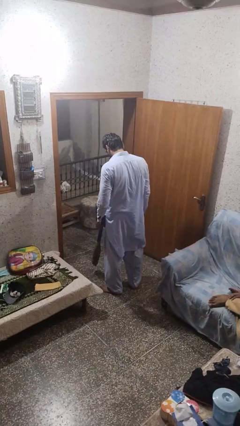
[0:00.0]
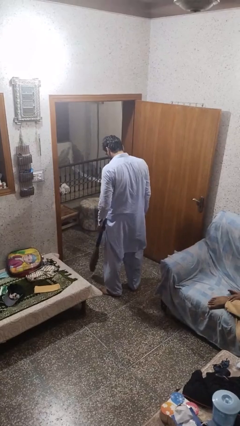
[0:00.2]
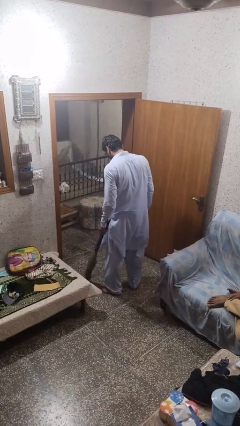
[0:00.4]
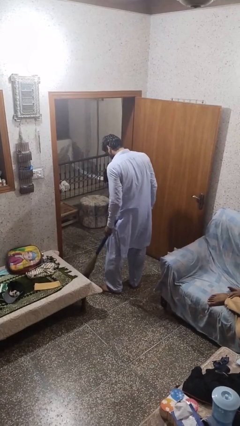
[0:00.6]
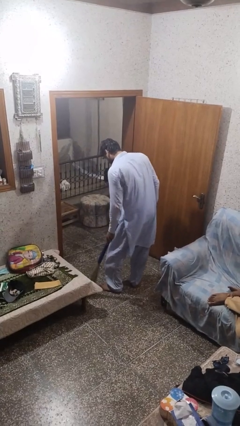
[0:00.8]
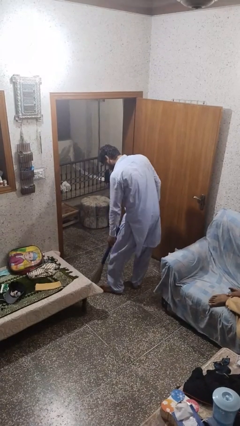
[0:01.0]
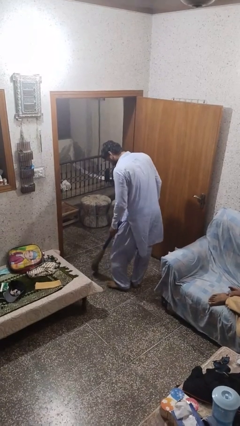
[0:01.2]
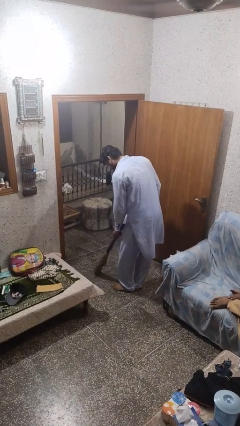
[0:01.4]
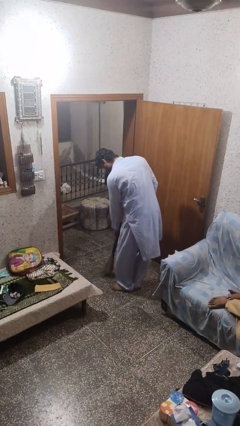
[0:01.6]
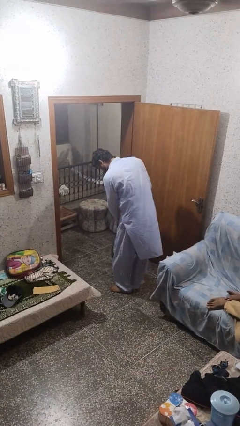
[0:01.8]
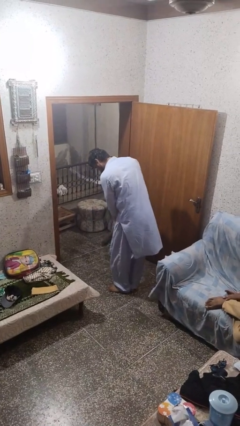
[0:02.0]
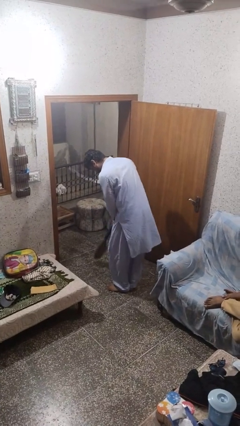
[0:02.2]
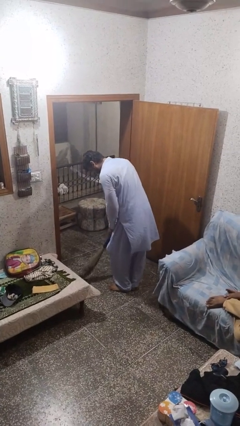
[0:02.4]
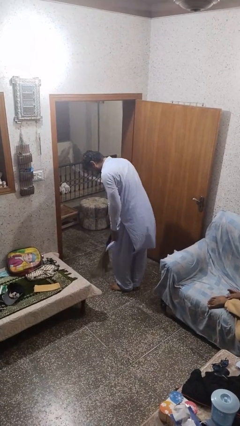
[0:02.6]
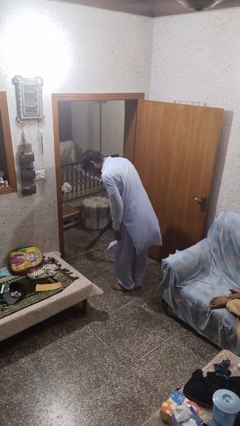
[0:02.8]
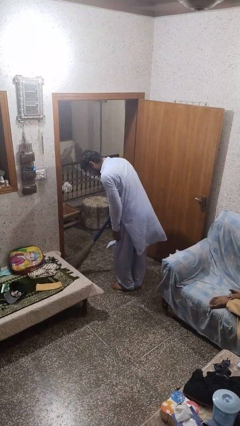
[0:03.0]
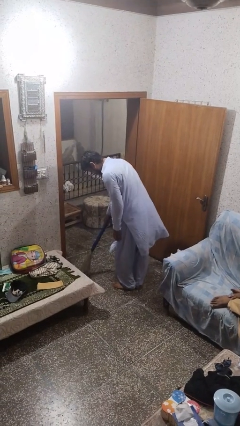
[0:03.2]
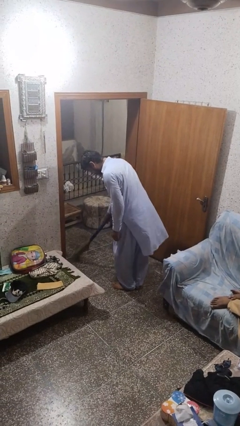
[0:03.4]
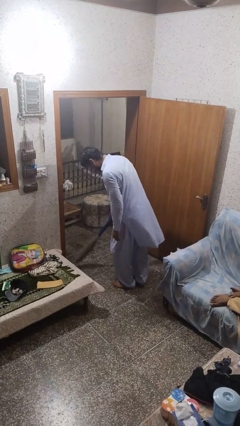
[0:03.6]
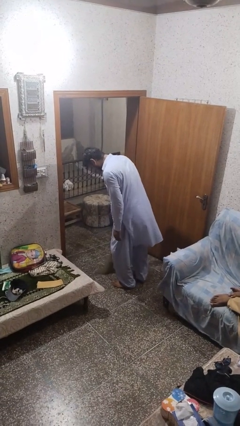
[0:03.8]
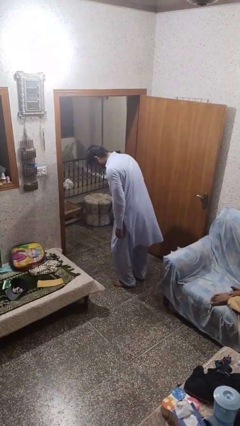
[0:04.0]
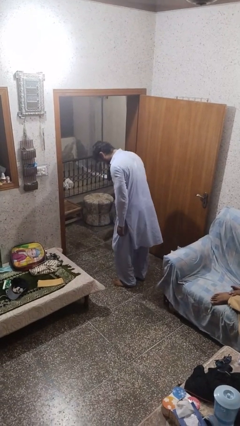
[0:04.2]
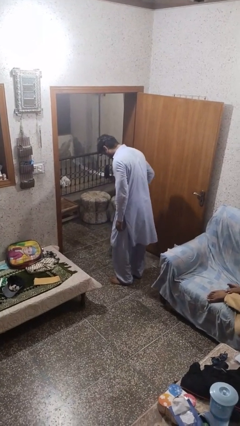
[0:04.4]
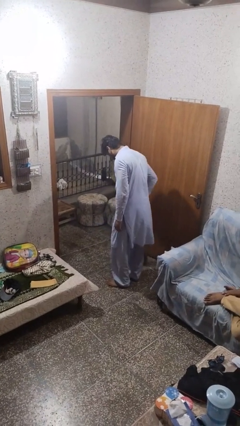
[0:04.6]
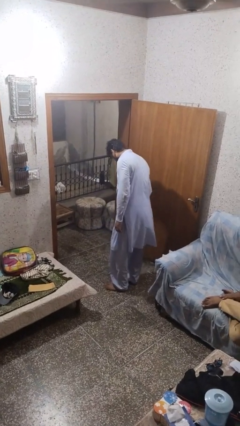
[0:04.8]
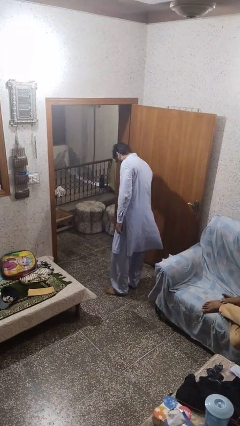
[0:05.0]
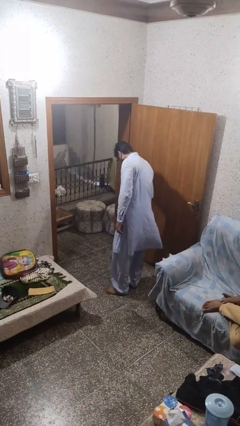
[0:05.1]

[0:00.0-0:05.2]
person sweeps floor

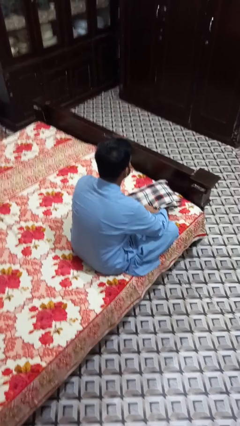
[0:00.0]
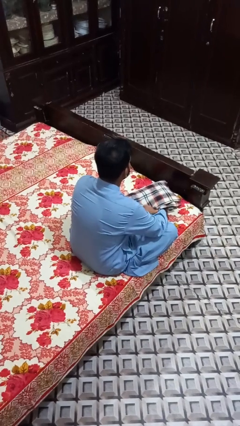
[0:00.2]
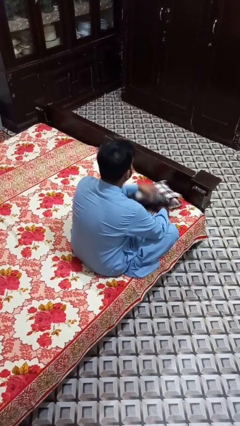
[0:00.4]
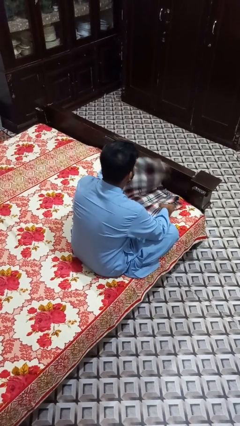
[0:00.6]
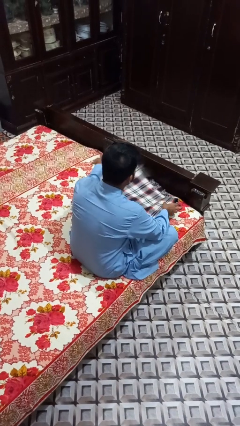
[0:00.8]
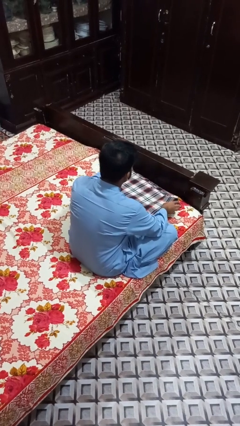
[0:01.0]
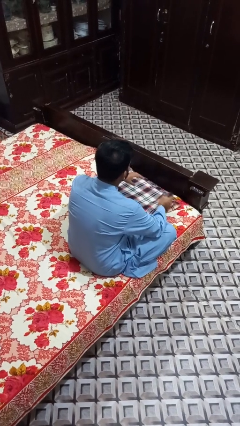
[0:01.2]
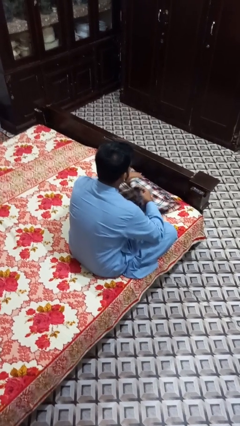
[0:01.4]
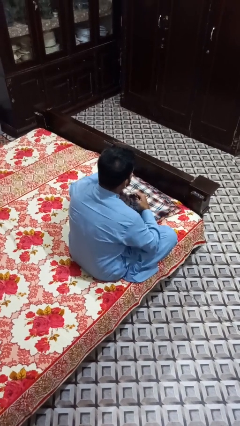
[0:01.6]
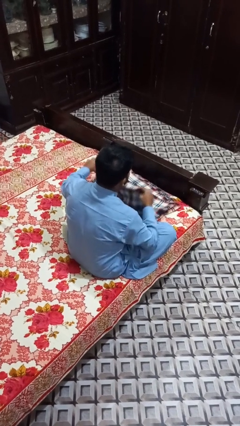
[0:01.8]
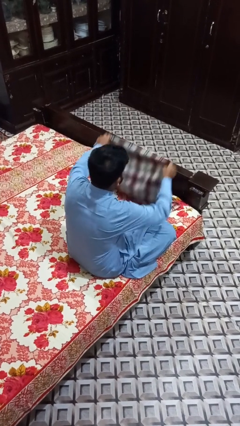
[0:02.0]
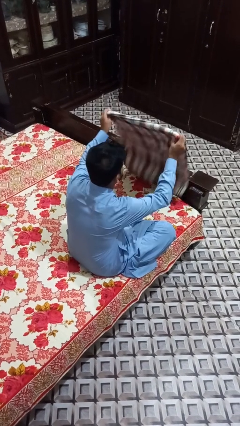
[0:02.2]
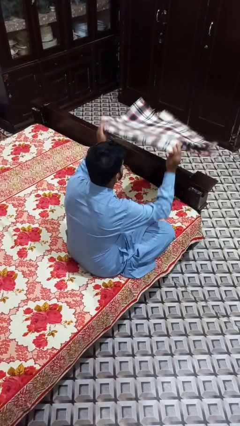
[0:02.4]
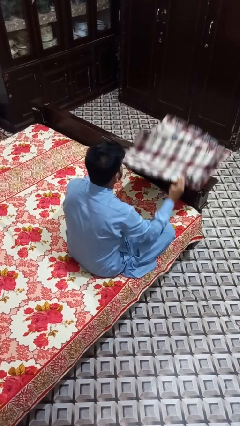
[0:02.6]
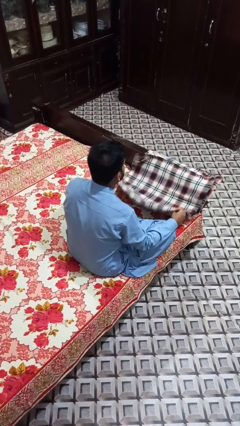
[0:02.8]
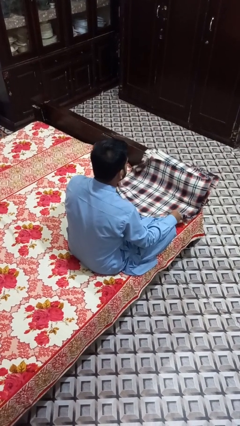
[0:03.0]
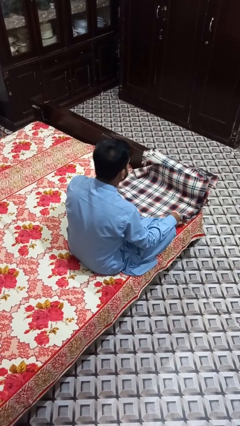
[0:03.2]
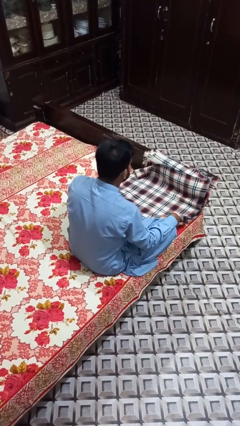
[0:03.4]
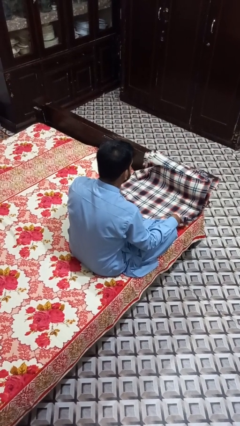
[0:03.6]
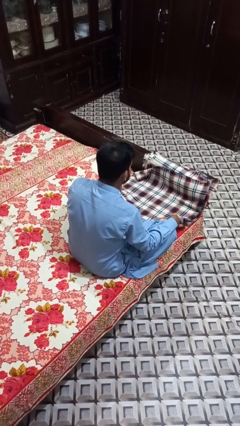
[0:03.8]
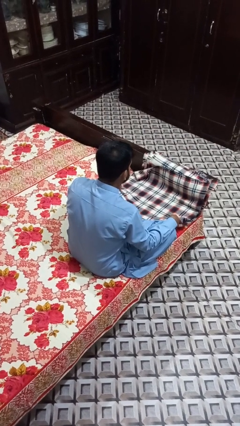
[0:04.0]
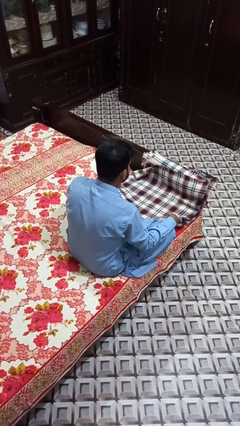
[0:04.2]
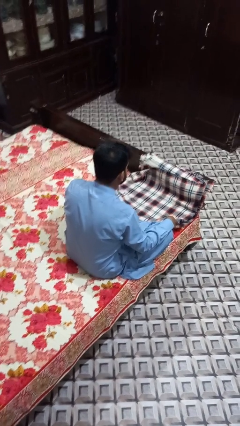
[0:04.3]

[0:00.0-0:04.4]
person unfolds blanket

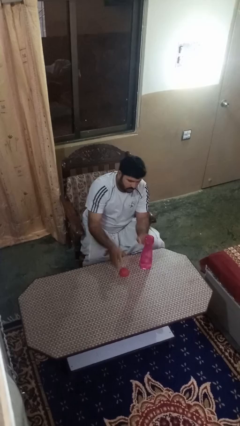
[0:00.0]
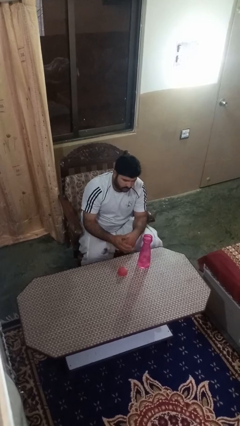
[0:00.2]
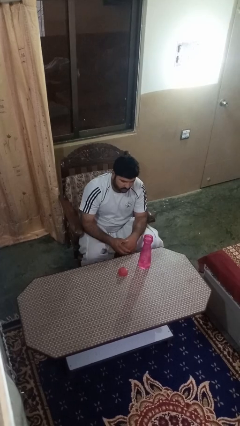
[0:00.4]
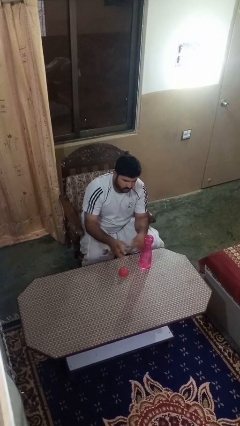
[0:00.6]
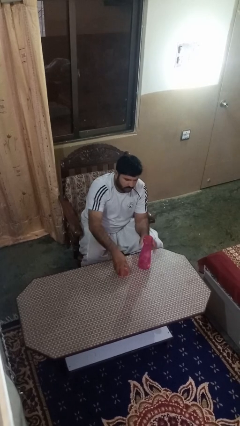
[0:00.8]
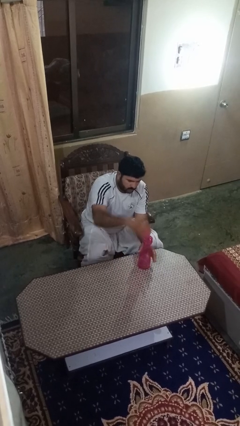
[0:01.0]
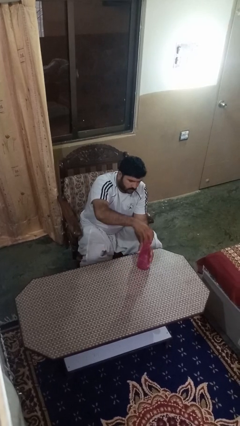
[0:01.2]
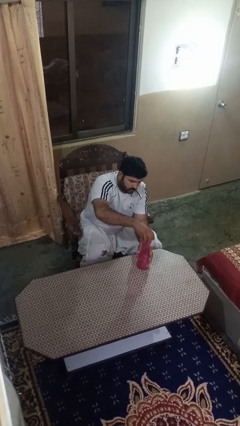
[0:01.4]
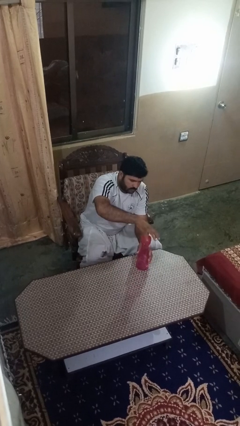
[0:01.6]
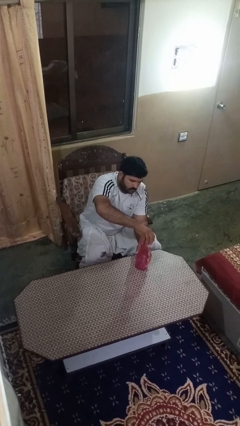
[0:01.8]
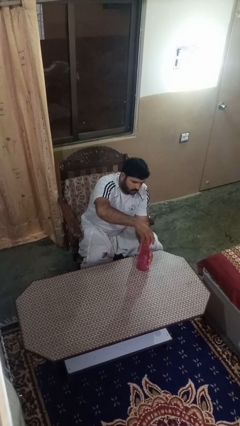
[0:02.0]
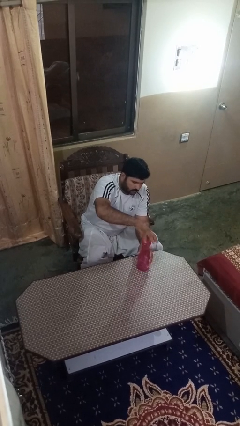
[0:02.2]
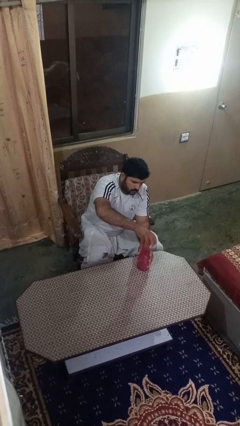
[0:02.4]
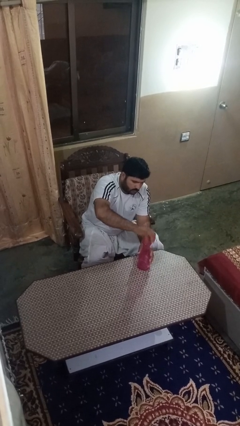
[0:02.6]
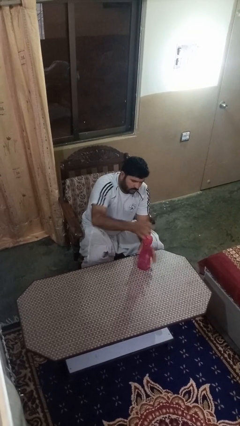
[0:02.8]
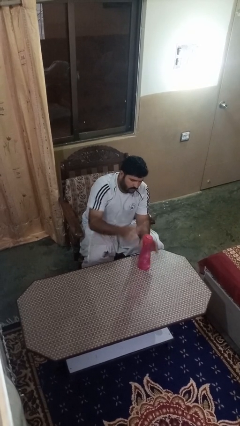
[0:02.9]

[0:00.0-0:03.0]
person screws lid to bottle

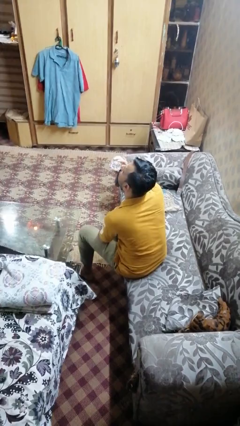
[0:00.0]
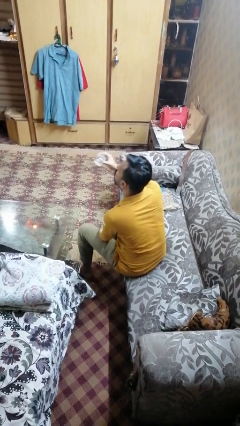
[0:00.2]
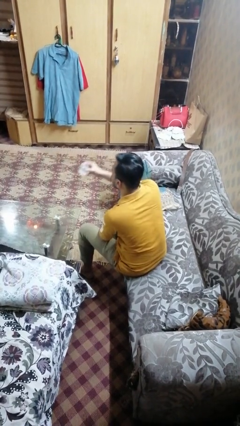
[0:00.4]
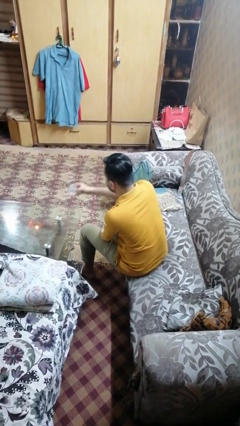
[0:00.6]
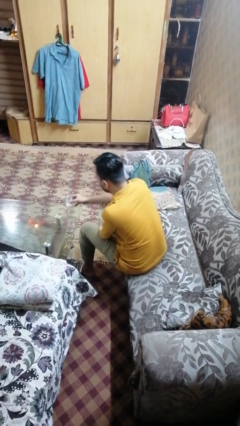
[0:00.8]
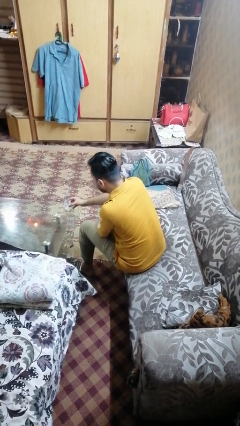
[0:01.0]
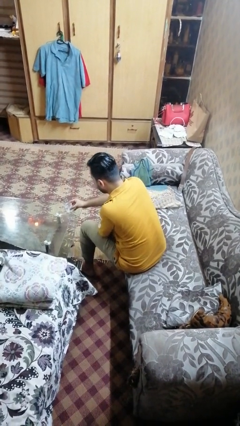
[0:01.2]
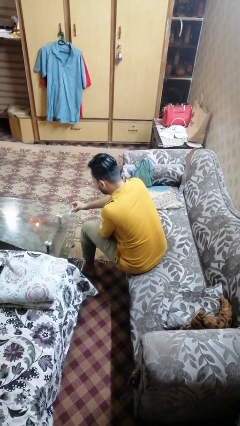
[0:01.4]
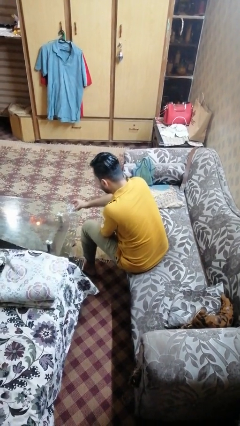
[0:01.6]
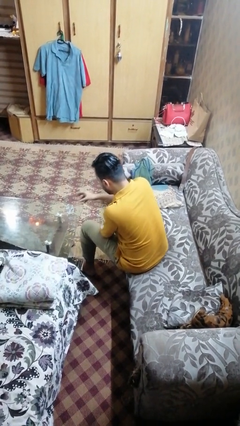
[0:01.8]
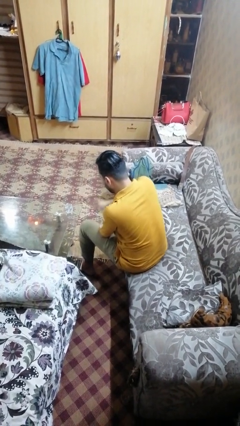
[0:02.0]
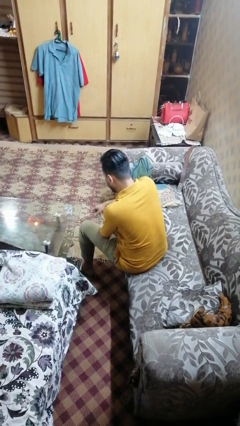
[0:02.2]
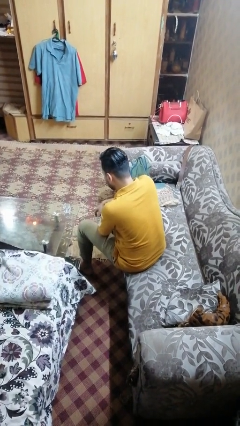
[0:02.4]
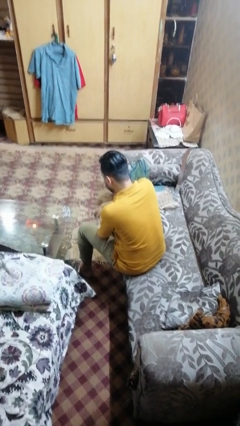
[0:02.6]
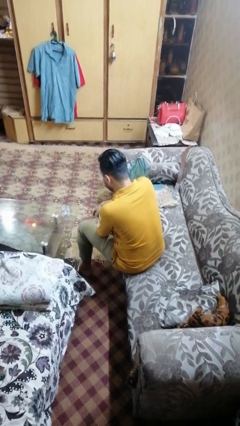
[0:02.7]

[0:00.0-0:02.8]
person puts down object on table

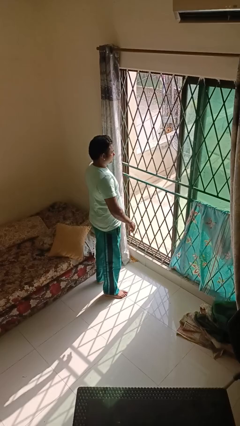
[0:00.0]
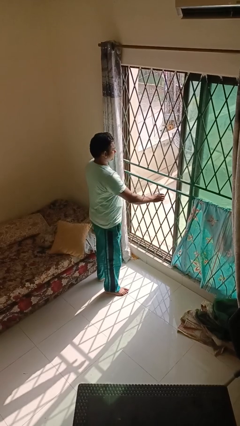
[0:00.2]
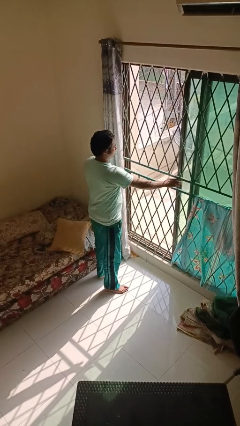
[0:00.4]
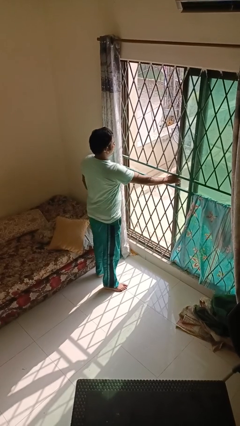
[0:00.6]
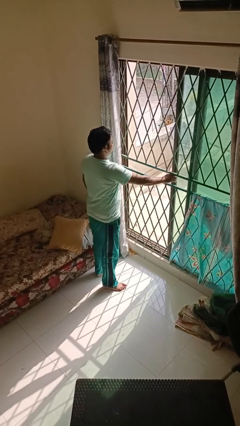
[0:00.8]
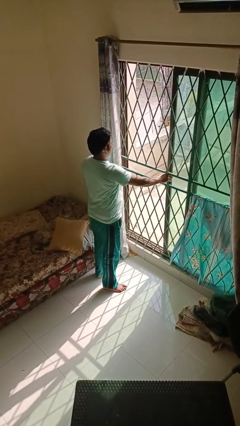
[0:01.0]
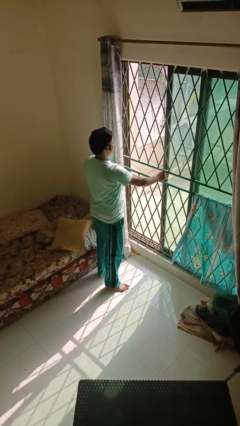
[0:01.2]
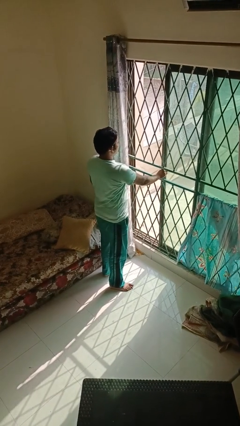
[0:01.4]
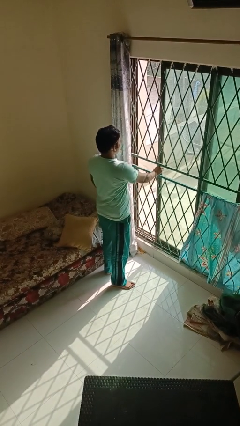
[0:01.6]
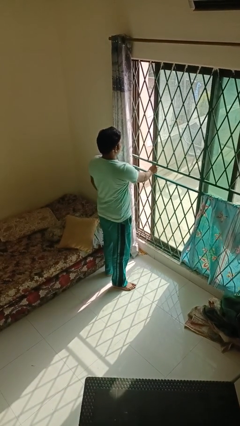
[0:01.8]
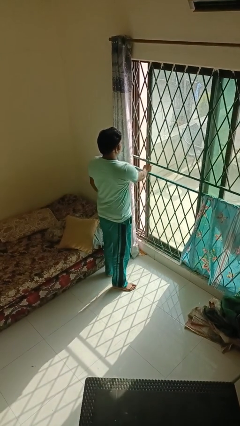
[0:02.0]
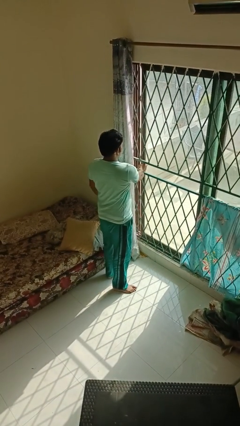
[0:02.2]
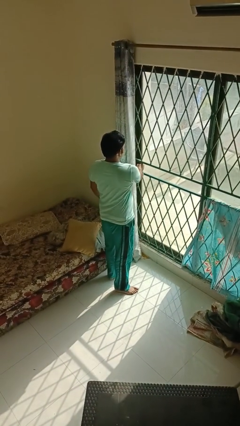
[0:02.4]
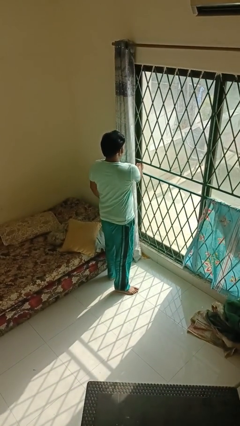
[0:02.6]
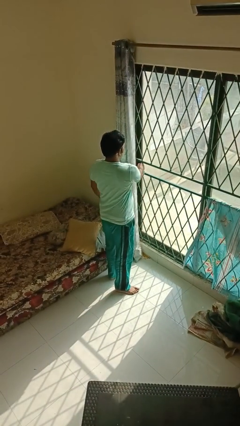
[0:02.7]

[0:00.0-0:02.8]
person closes home window
